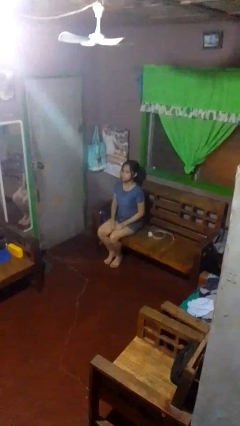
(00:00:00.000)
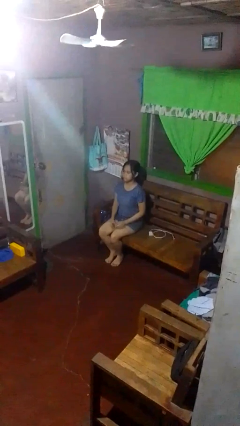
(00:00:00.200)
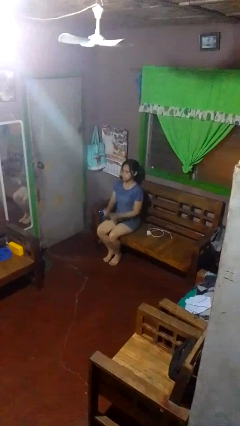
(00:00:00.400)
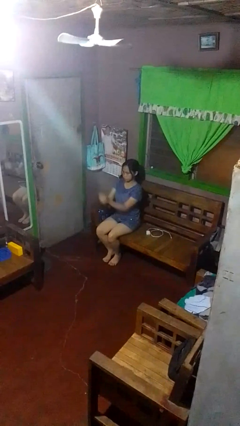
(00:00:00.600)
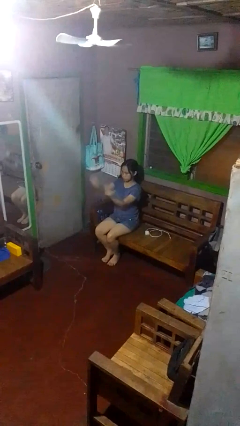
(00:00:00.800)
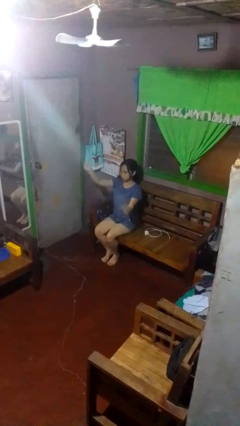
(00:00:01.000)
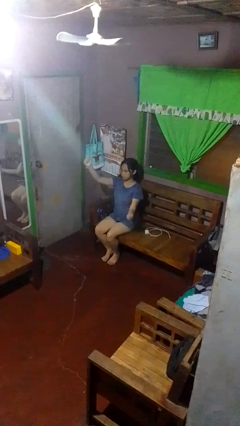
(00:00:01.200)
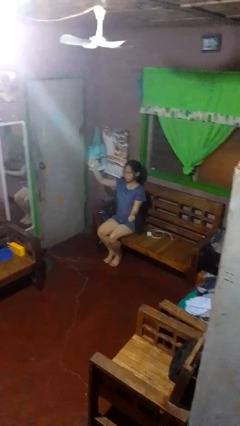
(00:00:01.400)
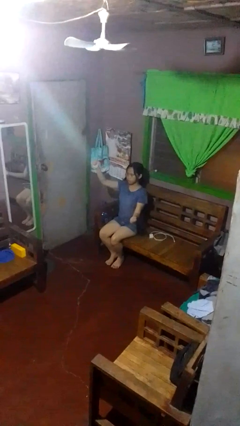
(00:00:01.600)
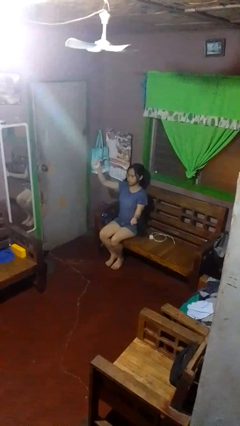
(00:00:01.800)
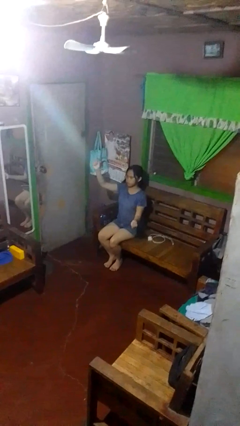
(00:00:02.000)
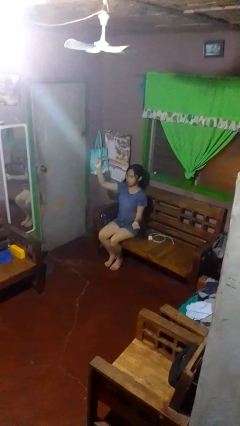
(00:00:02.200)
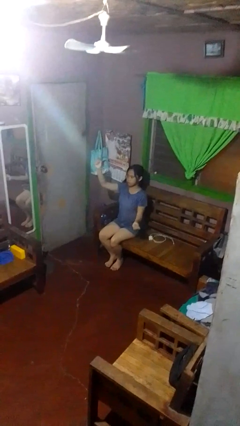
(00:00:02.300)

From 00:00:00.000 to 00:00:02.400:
person gestures zoom in

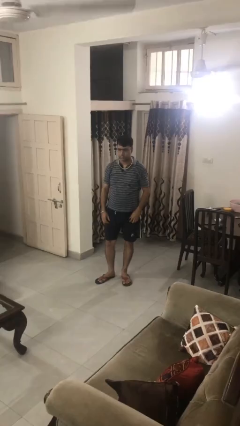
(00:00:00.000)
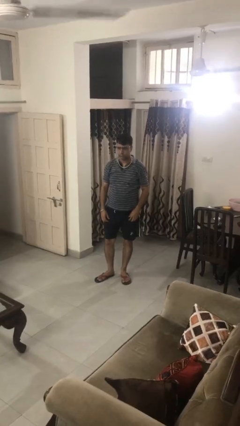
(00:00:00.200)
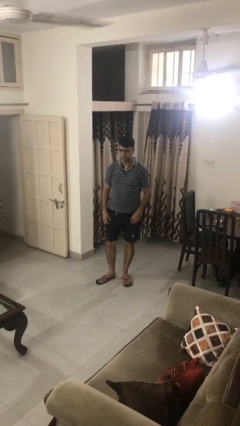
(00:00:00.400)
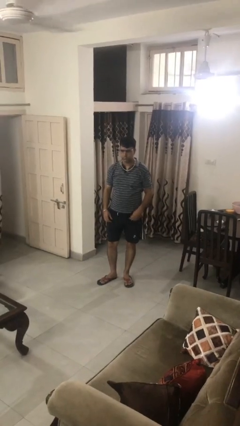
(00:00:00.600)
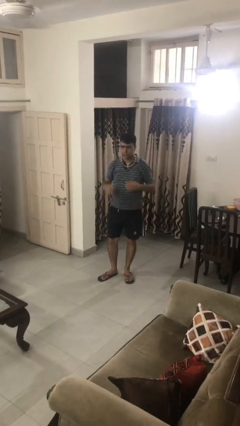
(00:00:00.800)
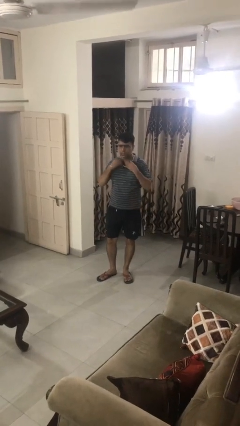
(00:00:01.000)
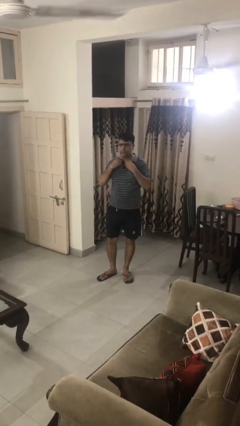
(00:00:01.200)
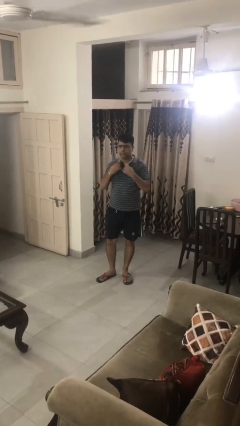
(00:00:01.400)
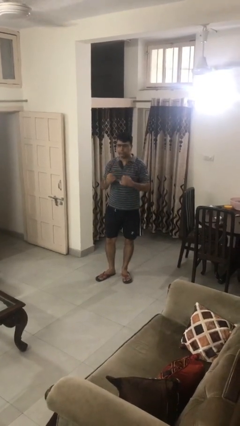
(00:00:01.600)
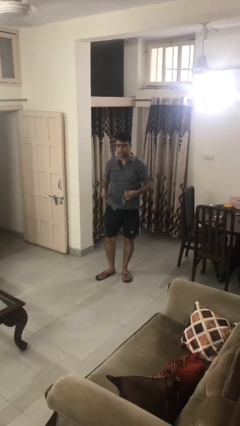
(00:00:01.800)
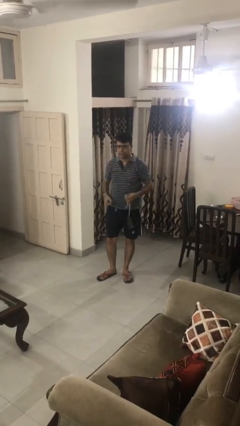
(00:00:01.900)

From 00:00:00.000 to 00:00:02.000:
person takes off necklace

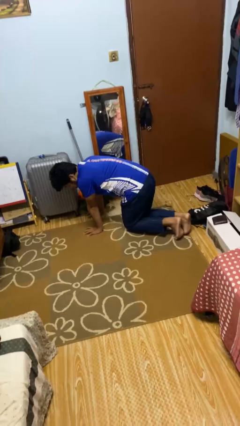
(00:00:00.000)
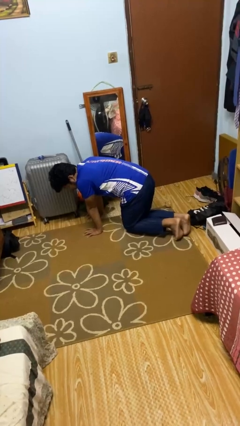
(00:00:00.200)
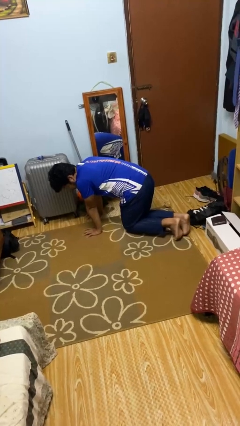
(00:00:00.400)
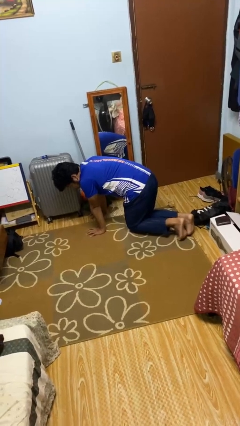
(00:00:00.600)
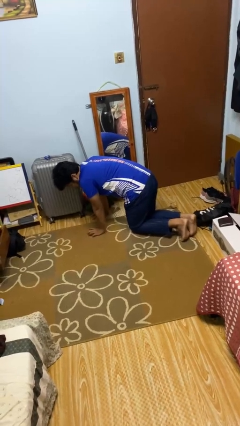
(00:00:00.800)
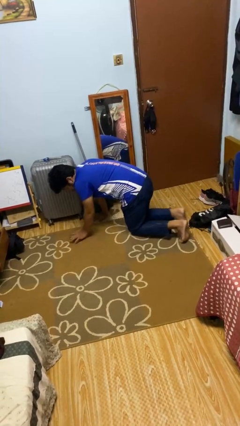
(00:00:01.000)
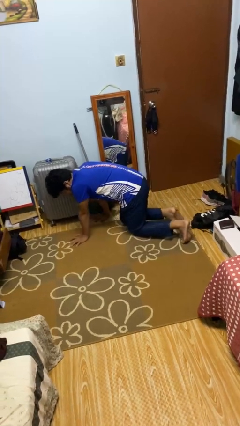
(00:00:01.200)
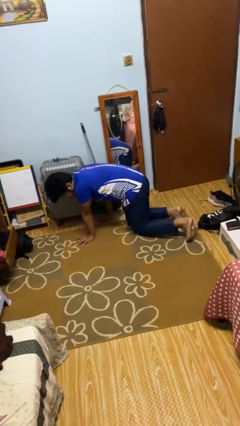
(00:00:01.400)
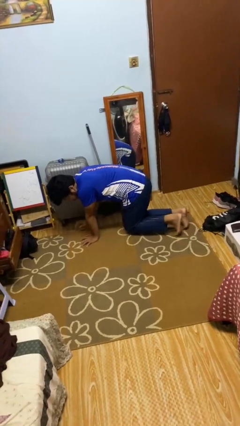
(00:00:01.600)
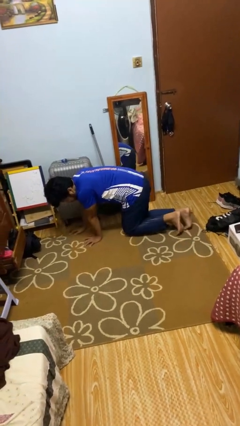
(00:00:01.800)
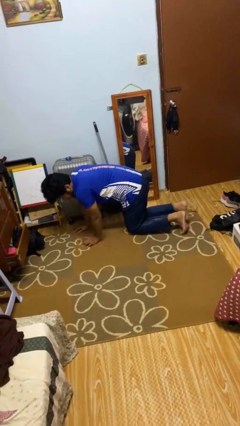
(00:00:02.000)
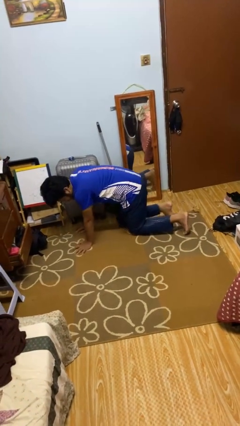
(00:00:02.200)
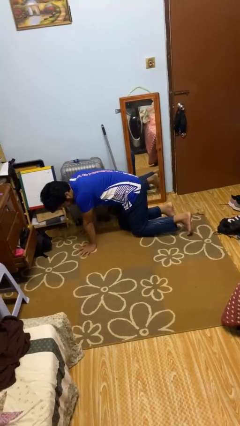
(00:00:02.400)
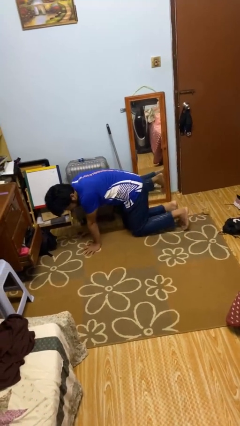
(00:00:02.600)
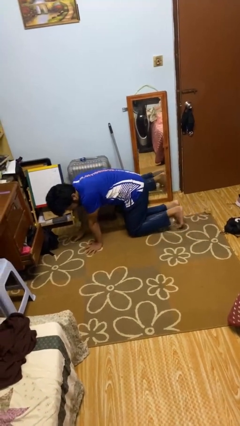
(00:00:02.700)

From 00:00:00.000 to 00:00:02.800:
person crawls

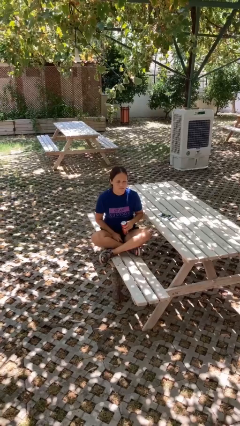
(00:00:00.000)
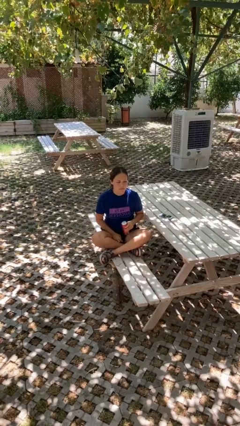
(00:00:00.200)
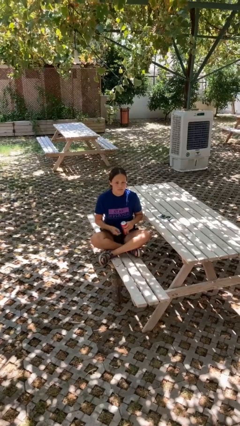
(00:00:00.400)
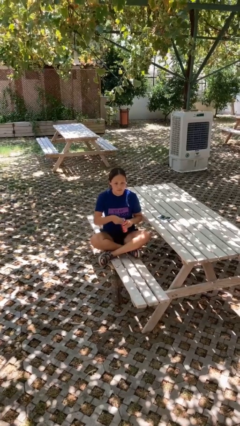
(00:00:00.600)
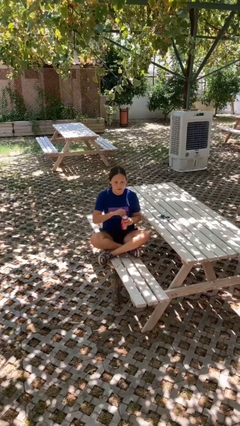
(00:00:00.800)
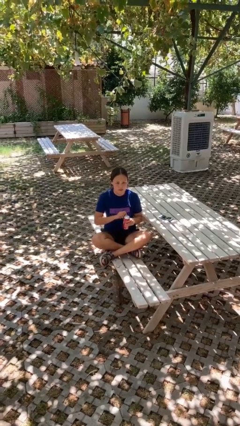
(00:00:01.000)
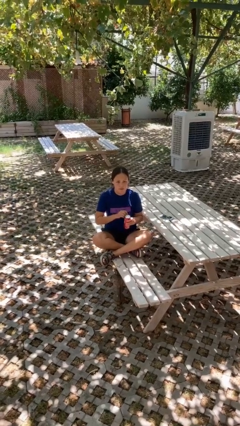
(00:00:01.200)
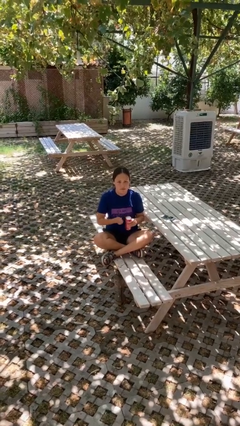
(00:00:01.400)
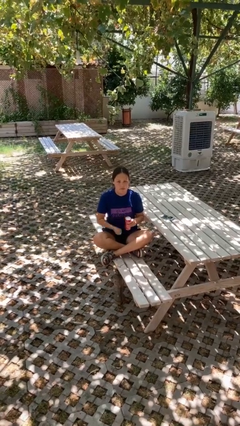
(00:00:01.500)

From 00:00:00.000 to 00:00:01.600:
person opens beverage can

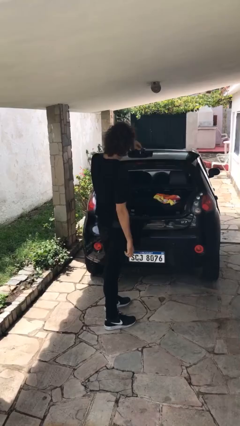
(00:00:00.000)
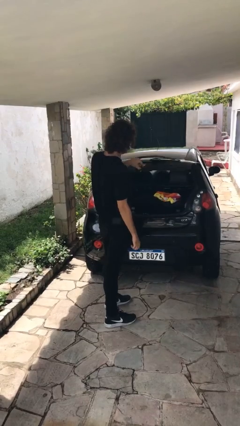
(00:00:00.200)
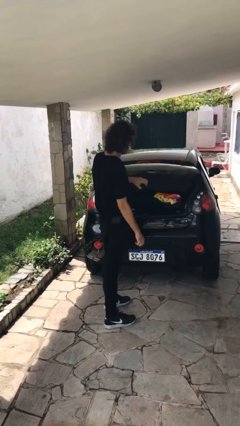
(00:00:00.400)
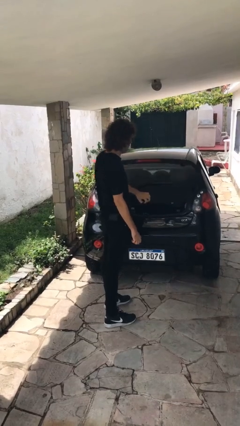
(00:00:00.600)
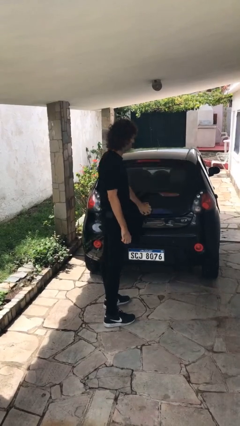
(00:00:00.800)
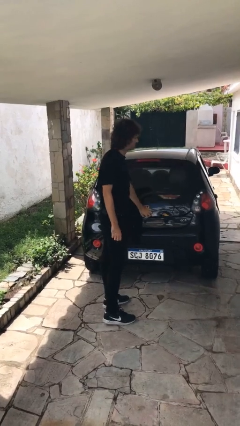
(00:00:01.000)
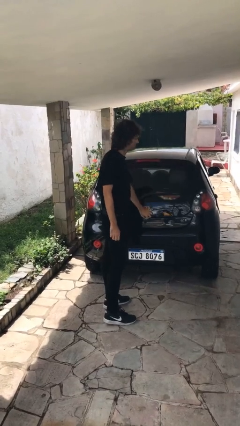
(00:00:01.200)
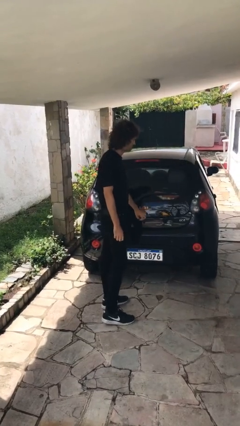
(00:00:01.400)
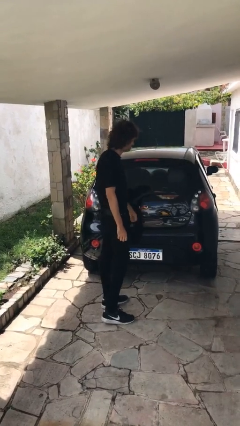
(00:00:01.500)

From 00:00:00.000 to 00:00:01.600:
person closes car trunk

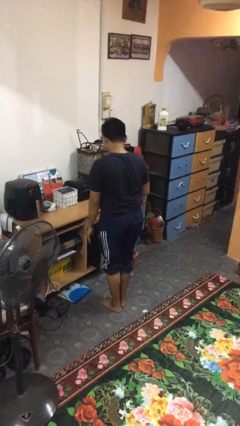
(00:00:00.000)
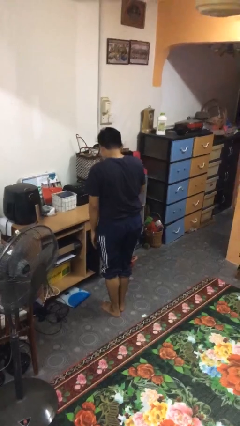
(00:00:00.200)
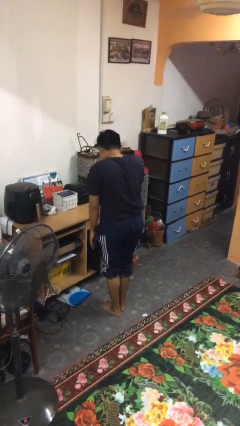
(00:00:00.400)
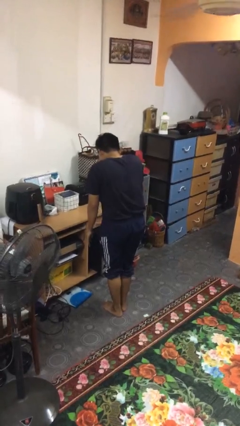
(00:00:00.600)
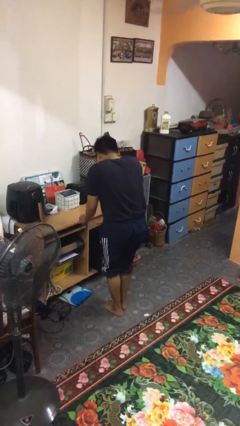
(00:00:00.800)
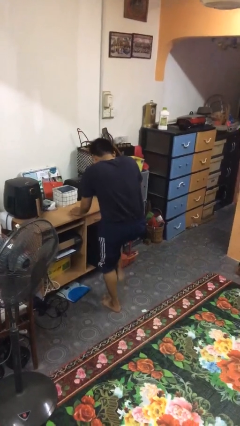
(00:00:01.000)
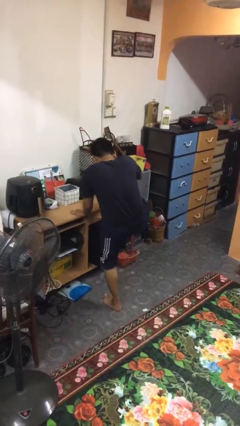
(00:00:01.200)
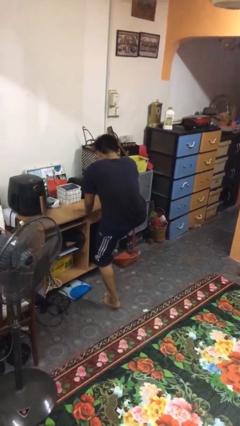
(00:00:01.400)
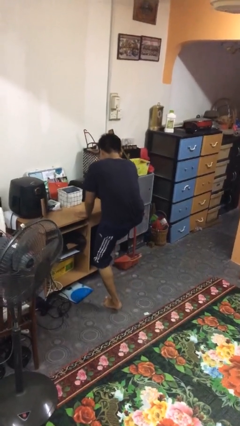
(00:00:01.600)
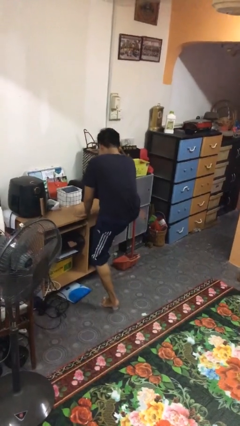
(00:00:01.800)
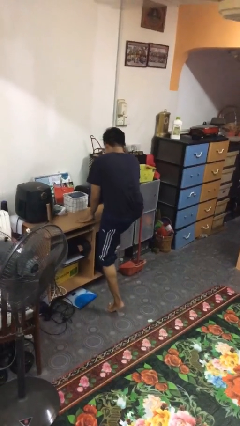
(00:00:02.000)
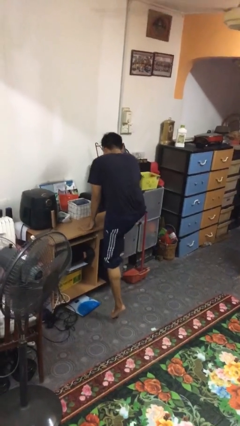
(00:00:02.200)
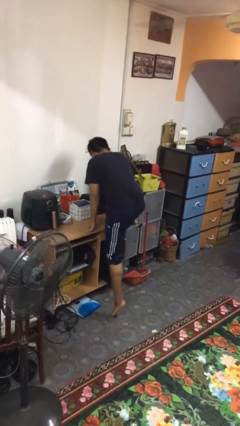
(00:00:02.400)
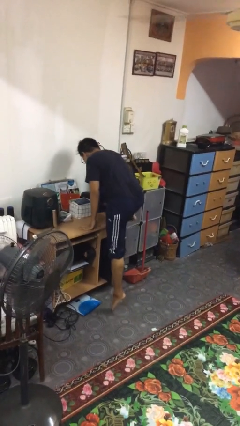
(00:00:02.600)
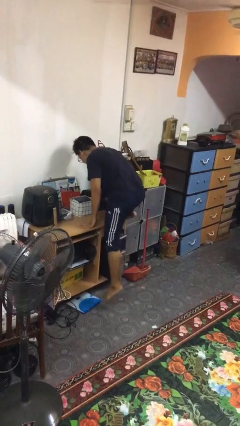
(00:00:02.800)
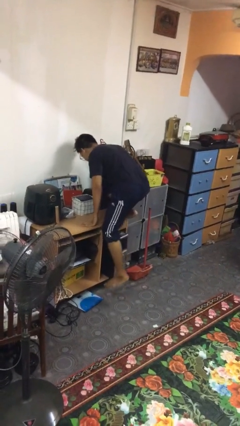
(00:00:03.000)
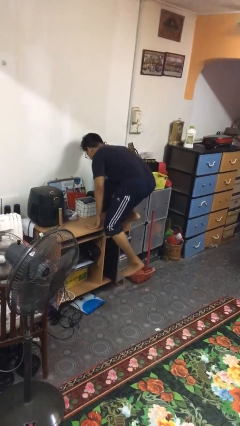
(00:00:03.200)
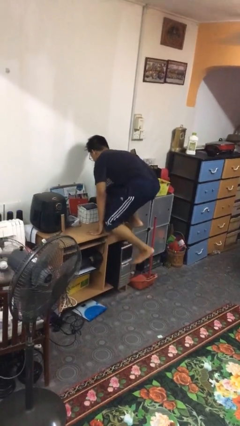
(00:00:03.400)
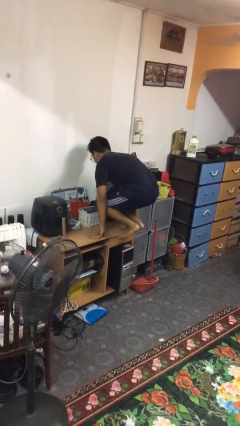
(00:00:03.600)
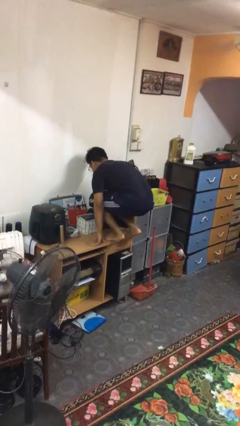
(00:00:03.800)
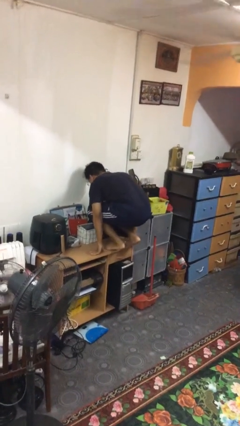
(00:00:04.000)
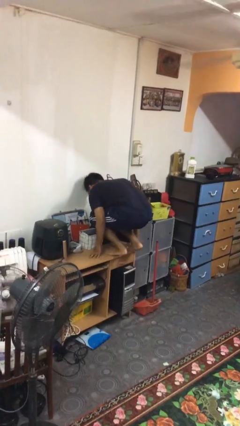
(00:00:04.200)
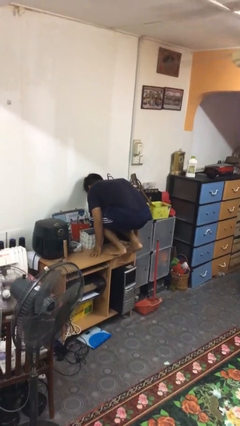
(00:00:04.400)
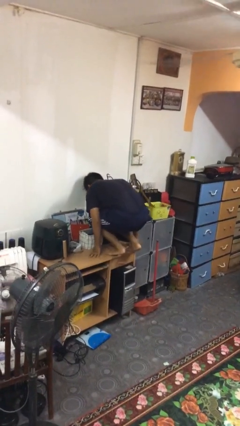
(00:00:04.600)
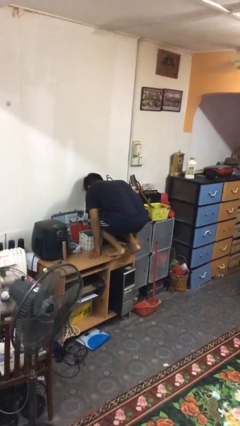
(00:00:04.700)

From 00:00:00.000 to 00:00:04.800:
person climbs on table

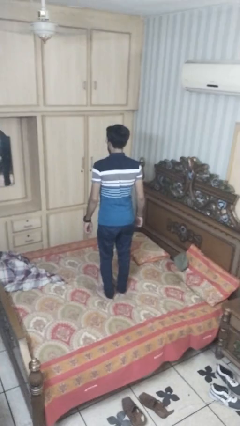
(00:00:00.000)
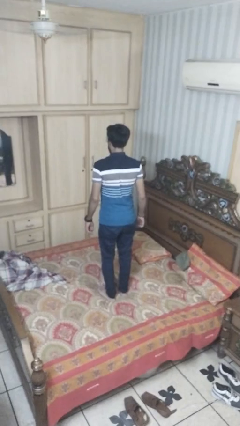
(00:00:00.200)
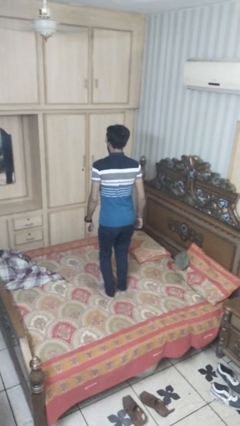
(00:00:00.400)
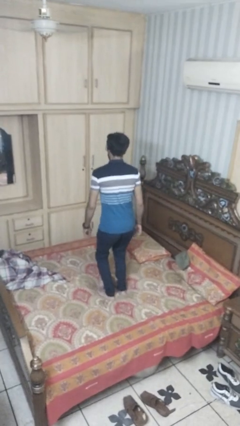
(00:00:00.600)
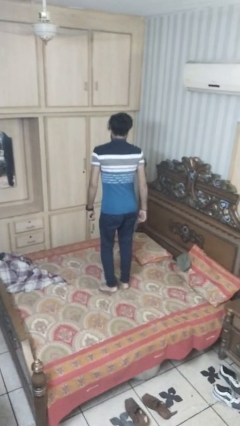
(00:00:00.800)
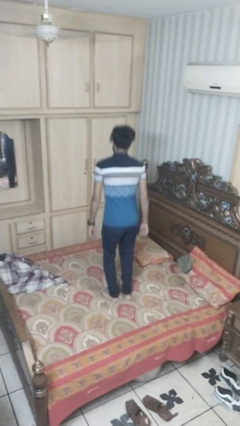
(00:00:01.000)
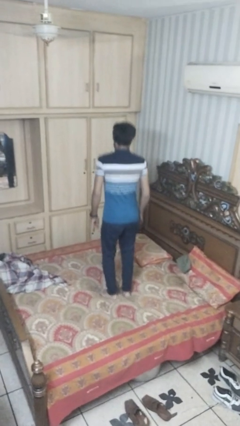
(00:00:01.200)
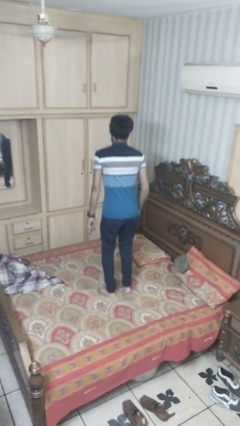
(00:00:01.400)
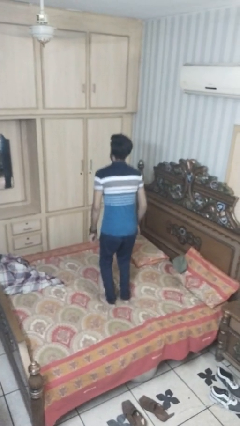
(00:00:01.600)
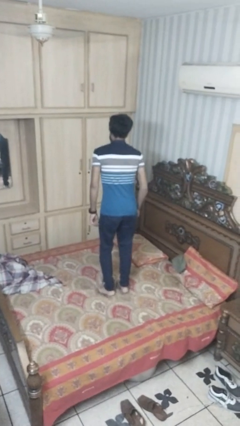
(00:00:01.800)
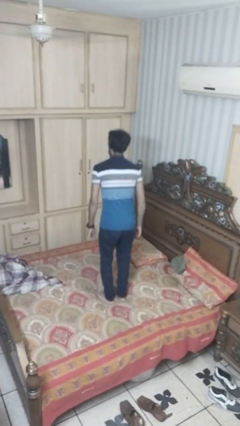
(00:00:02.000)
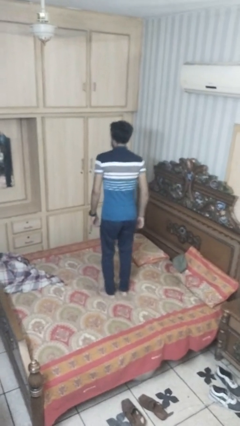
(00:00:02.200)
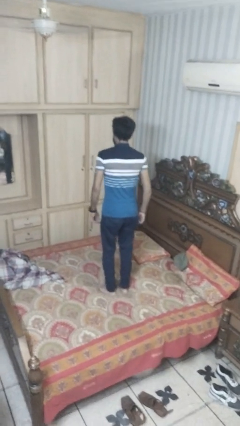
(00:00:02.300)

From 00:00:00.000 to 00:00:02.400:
person jumps on bed
